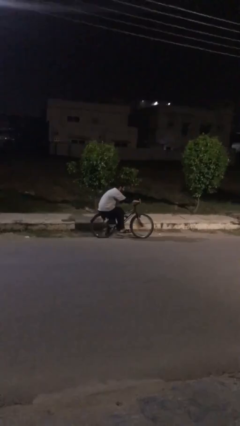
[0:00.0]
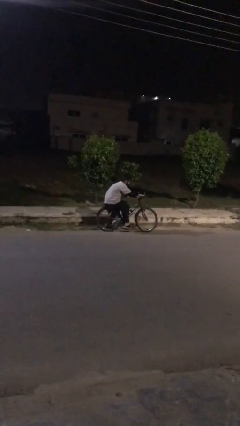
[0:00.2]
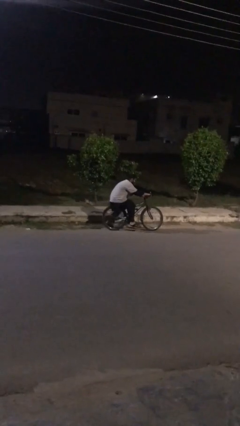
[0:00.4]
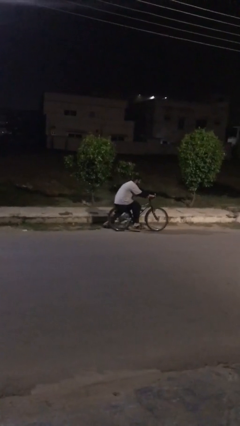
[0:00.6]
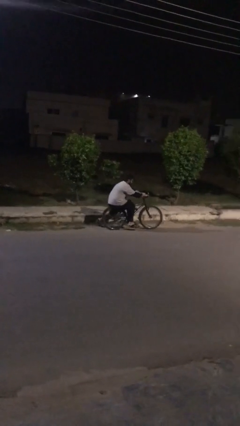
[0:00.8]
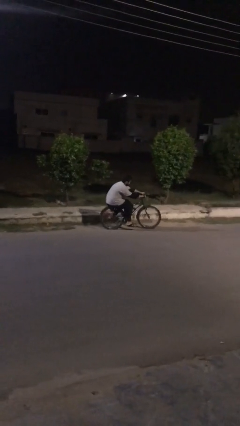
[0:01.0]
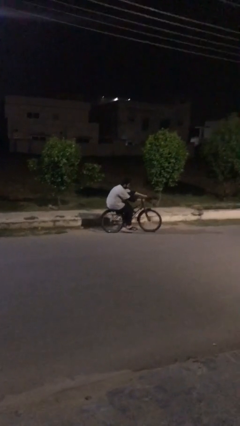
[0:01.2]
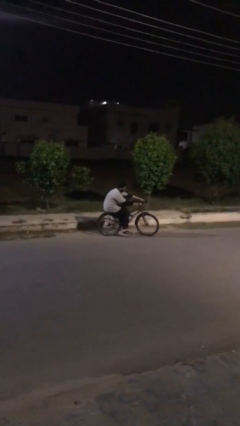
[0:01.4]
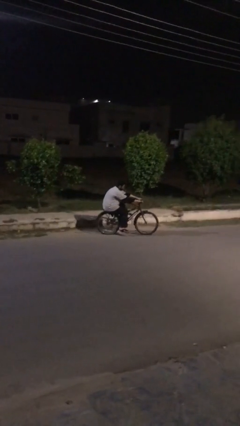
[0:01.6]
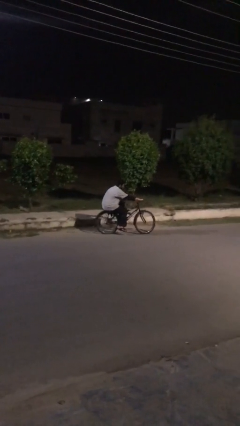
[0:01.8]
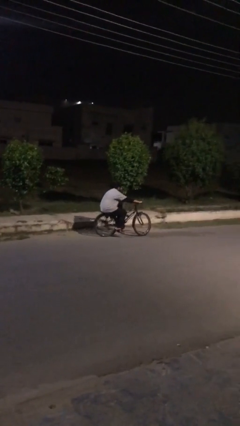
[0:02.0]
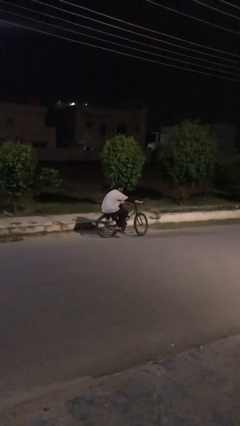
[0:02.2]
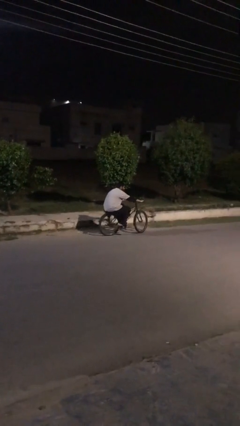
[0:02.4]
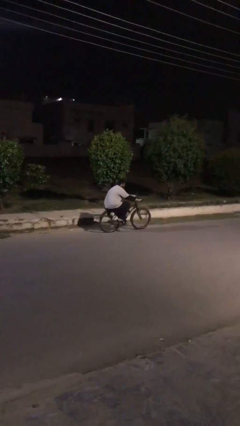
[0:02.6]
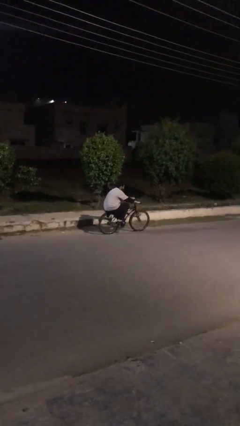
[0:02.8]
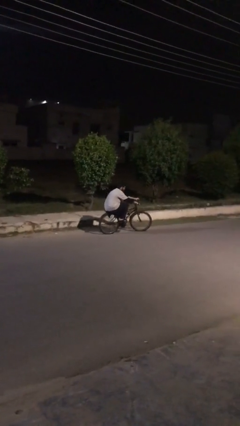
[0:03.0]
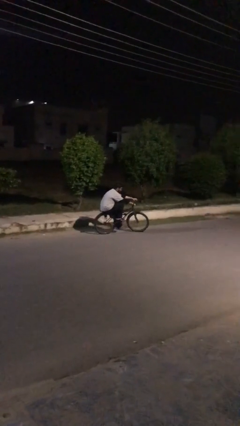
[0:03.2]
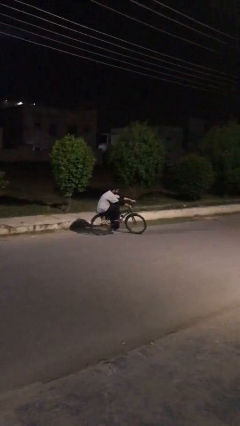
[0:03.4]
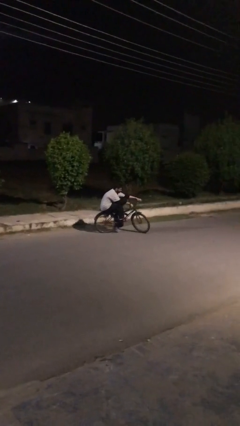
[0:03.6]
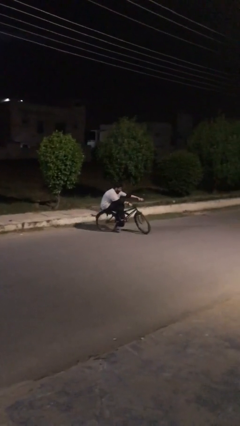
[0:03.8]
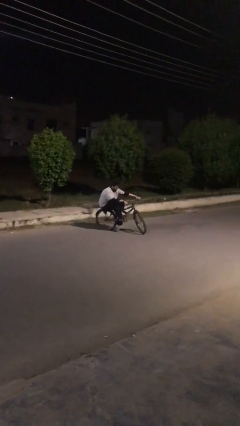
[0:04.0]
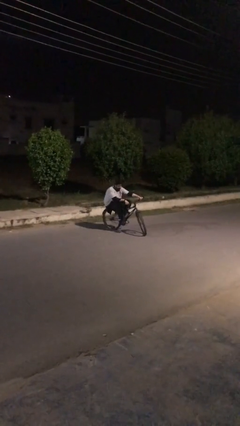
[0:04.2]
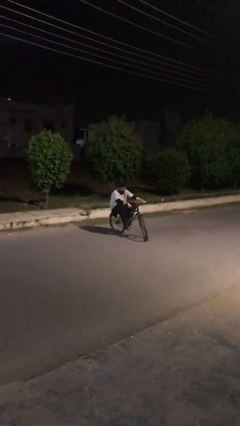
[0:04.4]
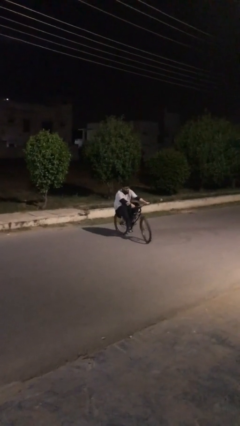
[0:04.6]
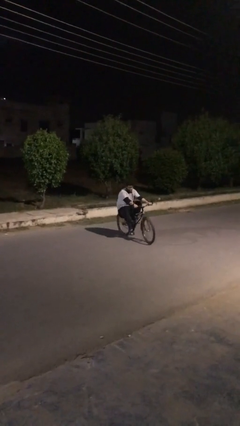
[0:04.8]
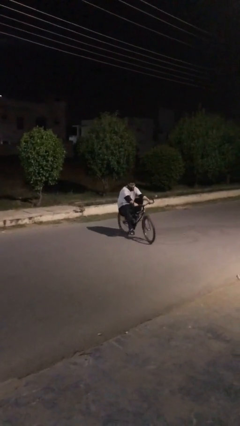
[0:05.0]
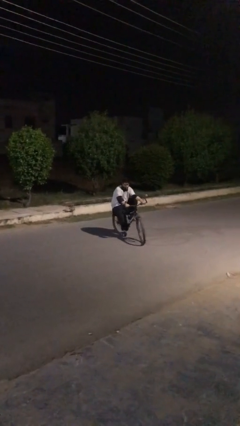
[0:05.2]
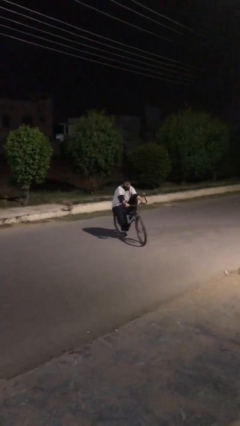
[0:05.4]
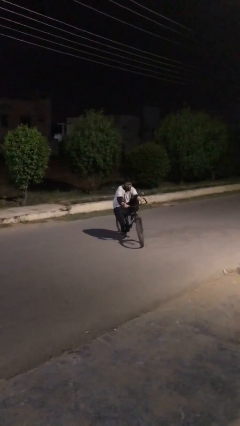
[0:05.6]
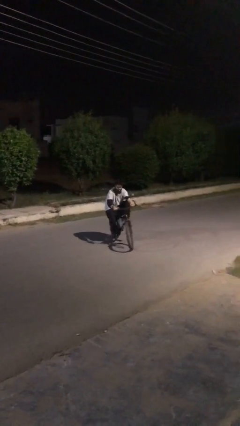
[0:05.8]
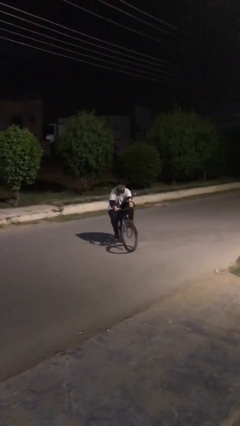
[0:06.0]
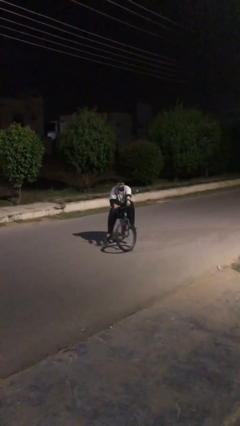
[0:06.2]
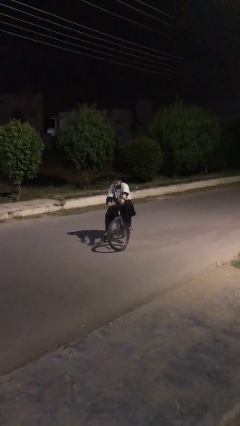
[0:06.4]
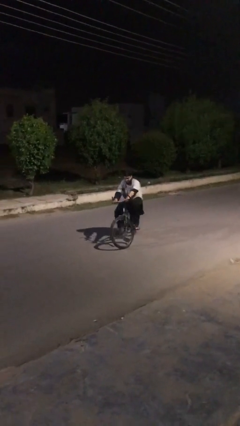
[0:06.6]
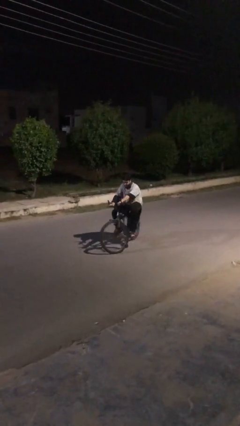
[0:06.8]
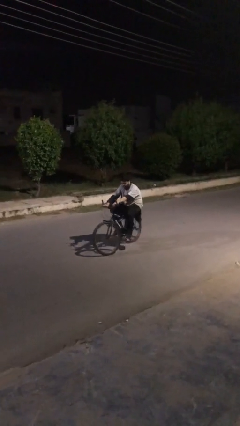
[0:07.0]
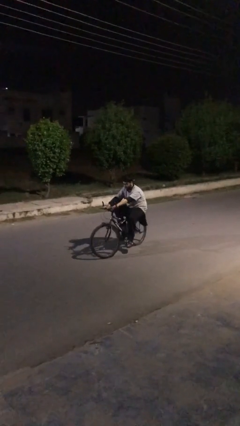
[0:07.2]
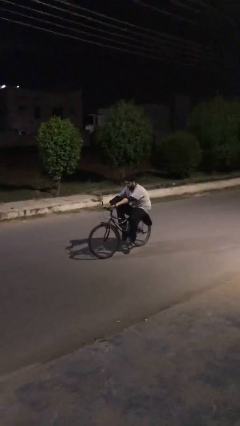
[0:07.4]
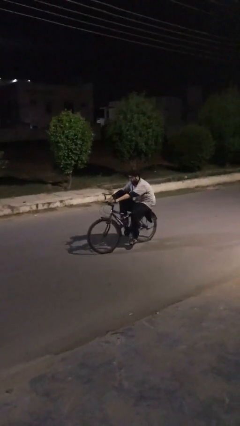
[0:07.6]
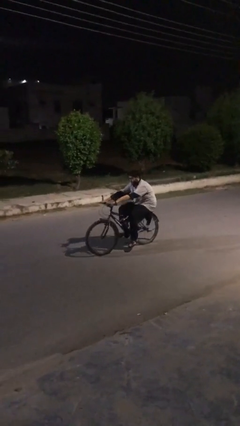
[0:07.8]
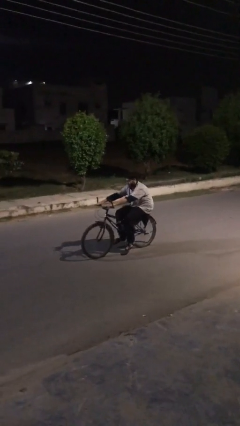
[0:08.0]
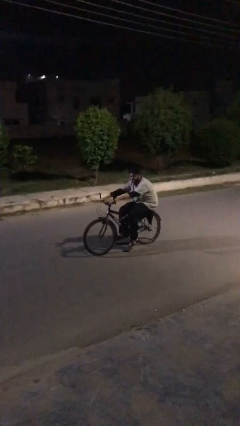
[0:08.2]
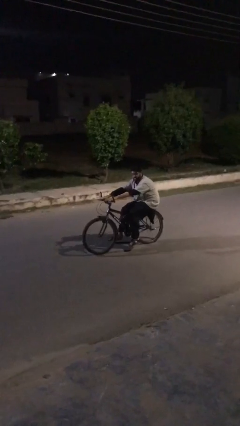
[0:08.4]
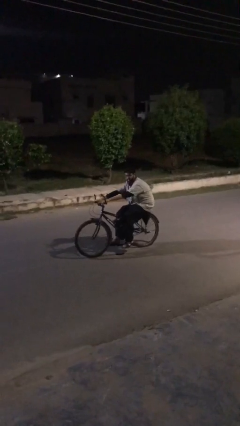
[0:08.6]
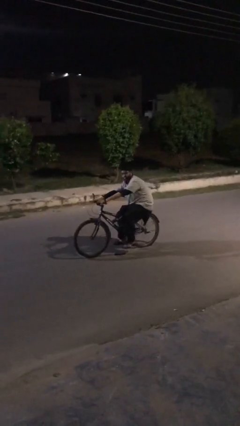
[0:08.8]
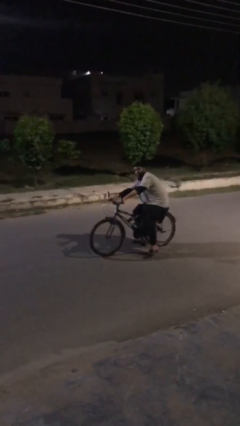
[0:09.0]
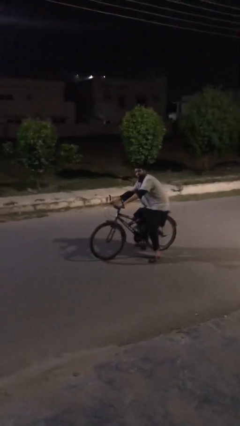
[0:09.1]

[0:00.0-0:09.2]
person rides bicycle

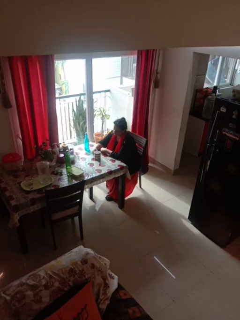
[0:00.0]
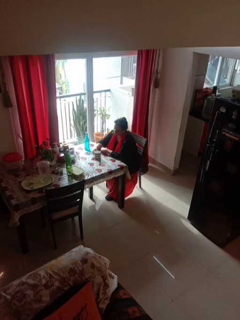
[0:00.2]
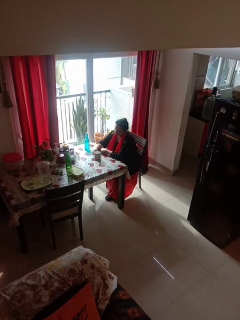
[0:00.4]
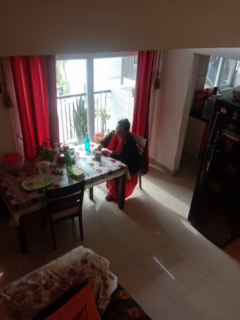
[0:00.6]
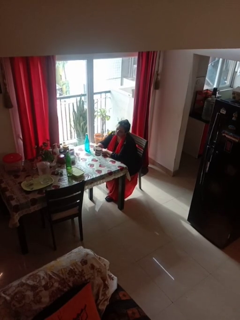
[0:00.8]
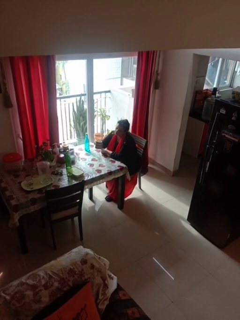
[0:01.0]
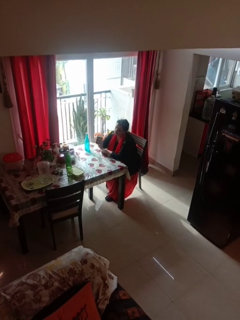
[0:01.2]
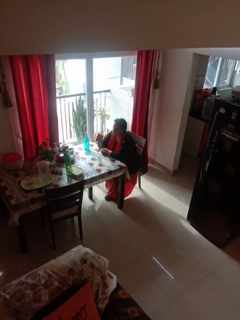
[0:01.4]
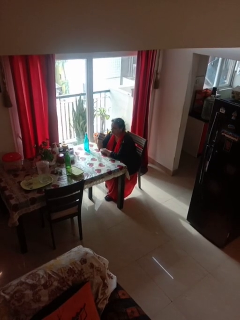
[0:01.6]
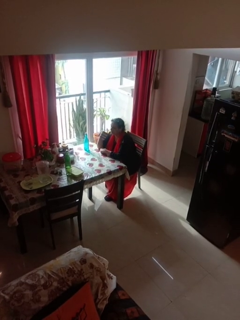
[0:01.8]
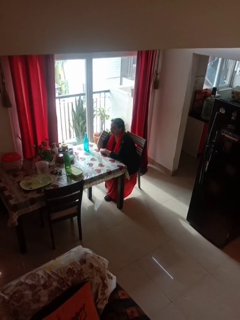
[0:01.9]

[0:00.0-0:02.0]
person picks up object from table

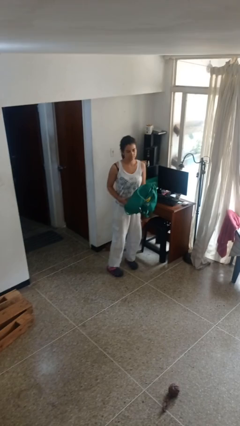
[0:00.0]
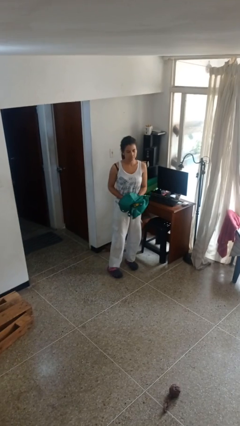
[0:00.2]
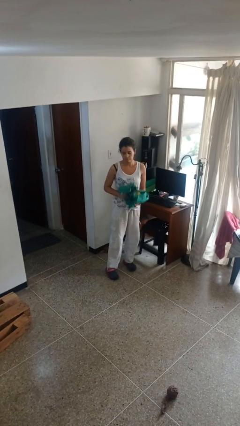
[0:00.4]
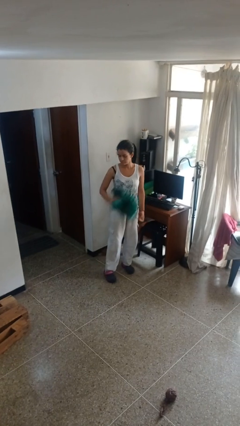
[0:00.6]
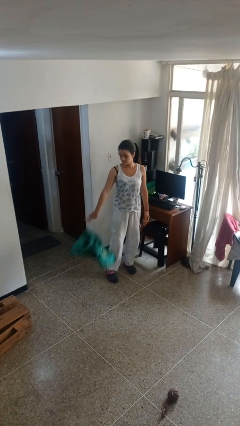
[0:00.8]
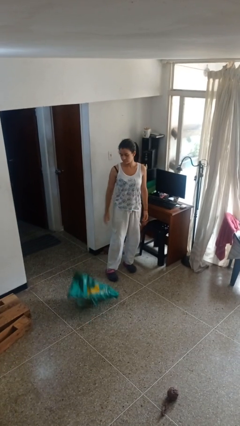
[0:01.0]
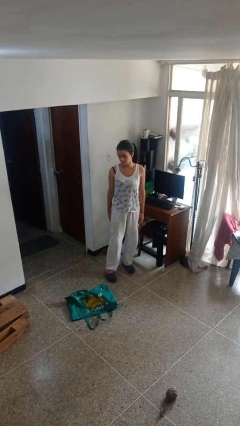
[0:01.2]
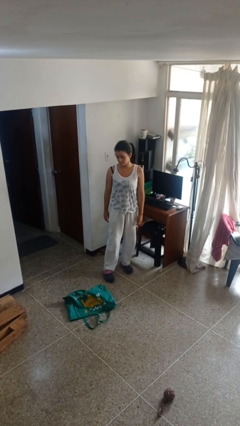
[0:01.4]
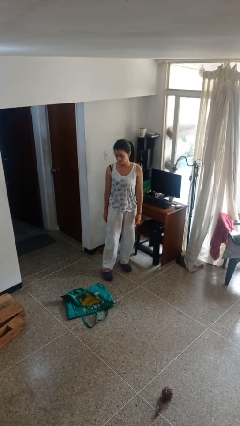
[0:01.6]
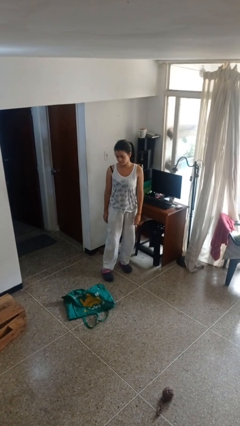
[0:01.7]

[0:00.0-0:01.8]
person throws object to ground

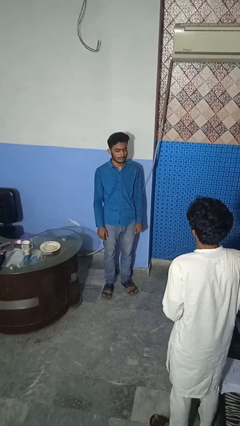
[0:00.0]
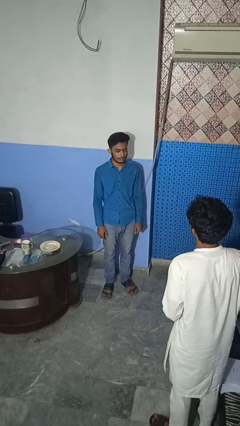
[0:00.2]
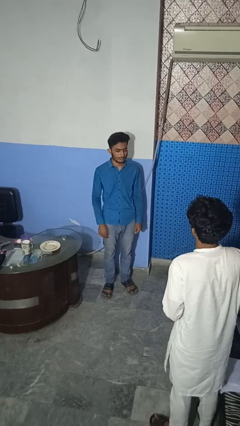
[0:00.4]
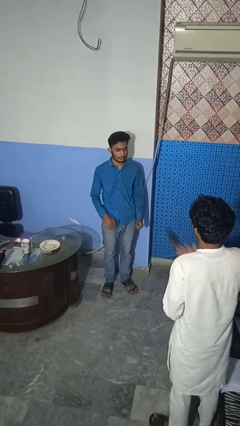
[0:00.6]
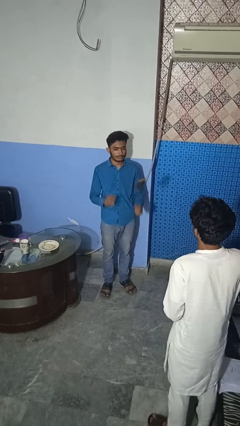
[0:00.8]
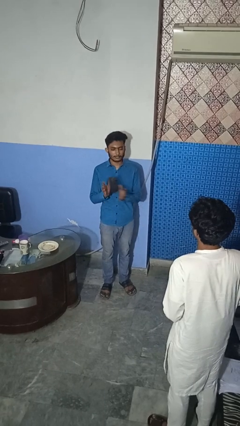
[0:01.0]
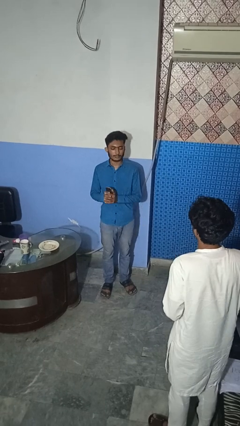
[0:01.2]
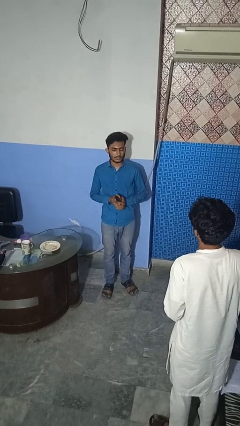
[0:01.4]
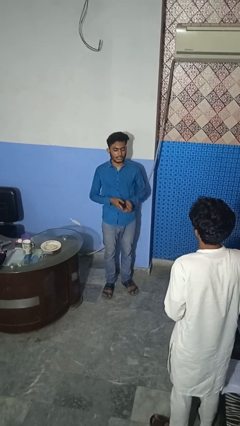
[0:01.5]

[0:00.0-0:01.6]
person catches object from person

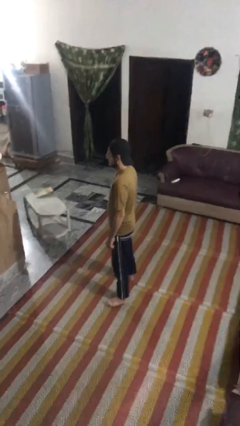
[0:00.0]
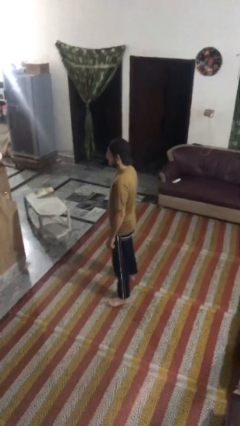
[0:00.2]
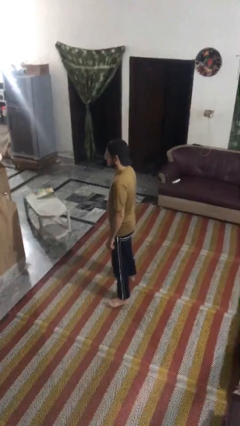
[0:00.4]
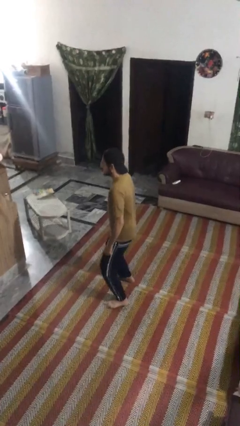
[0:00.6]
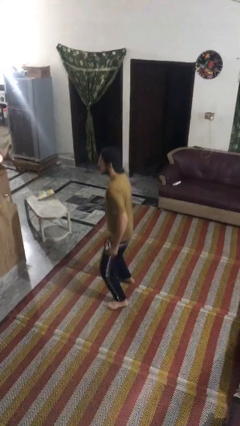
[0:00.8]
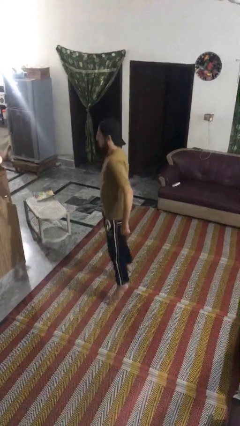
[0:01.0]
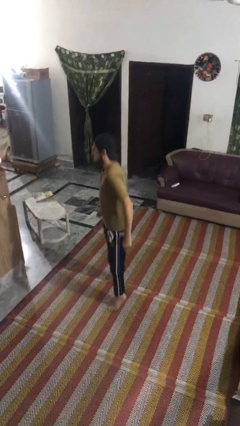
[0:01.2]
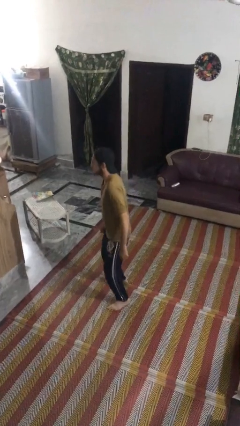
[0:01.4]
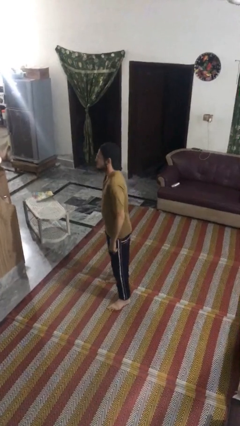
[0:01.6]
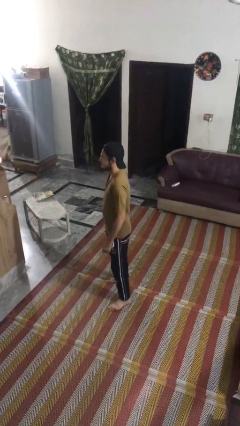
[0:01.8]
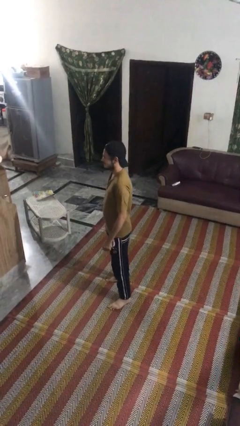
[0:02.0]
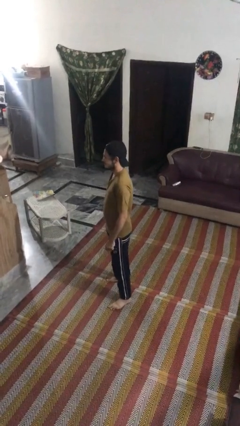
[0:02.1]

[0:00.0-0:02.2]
person jumps

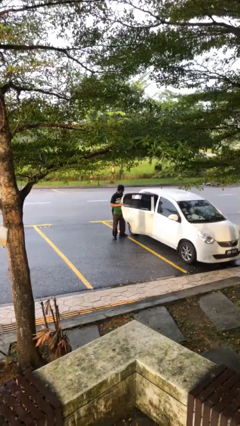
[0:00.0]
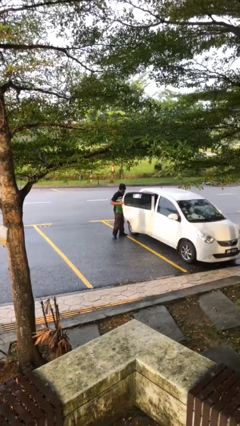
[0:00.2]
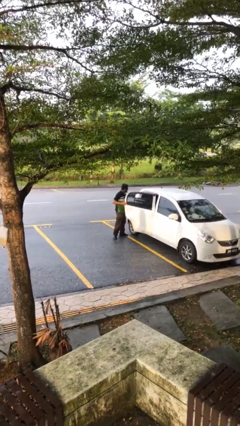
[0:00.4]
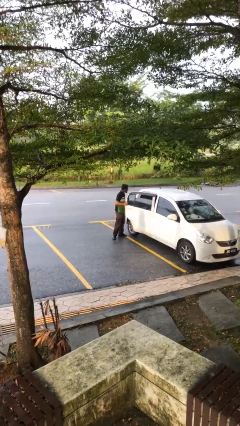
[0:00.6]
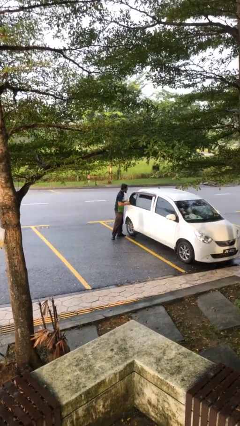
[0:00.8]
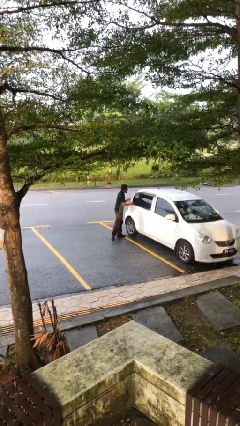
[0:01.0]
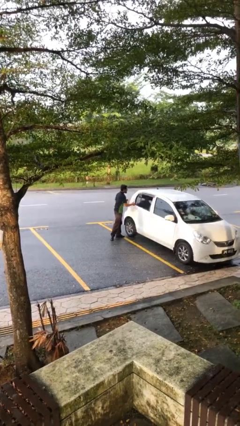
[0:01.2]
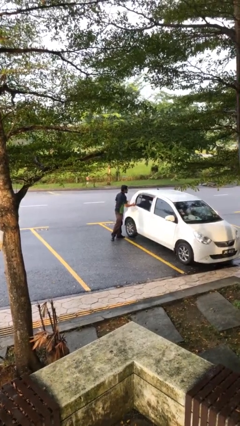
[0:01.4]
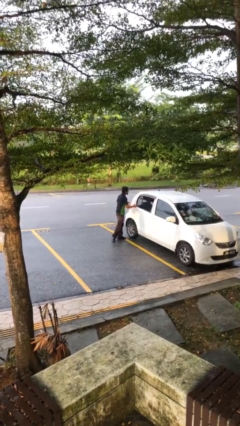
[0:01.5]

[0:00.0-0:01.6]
person closes car door
